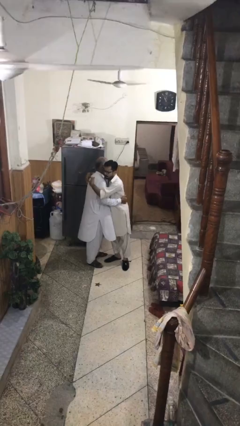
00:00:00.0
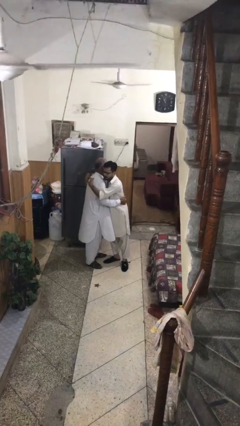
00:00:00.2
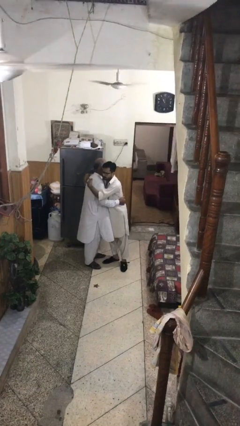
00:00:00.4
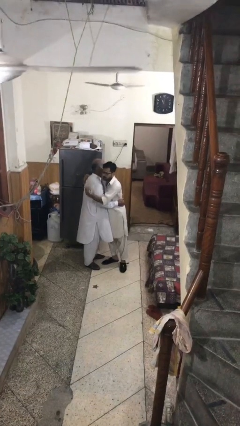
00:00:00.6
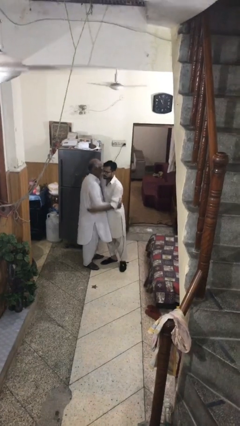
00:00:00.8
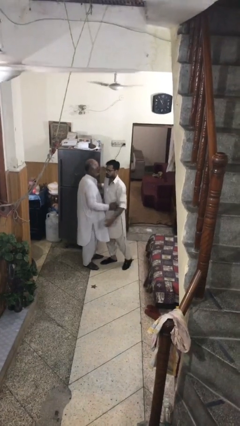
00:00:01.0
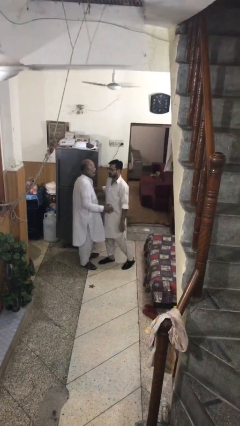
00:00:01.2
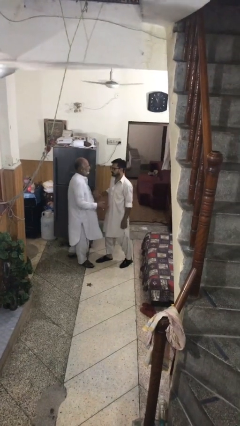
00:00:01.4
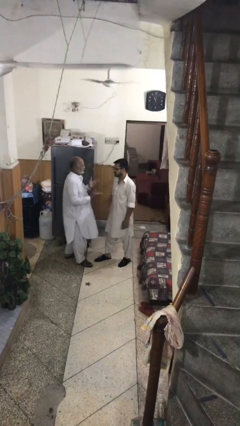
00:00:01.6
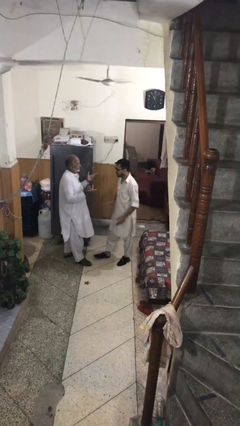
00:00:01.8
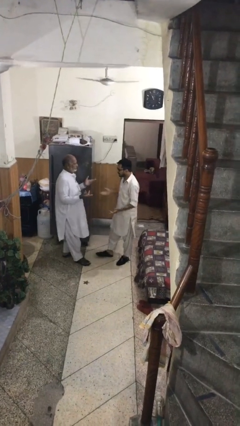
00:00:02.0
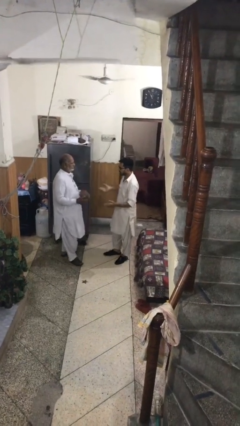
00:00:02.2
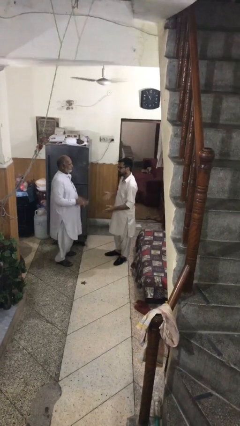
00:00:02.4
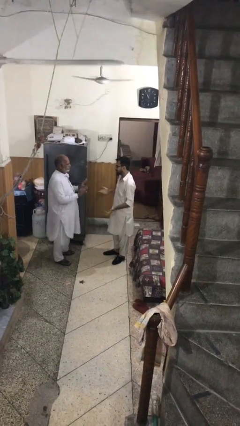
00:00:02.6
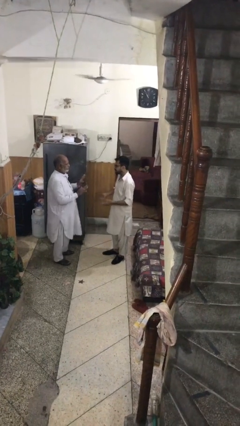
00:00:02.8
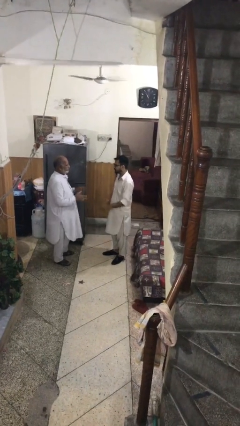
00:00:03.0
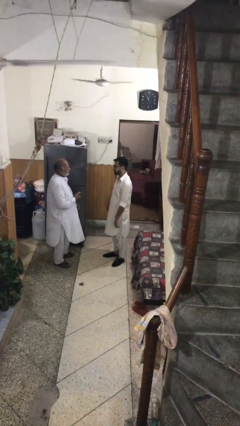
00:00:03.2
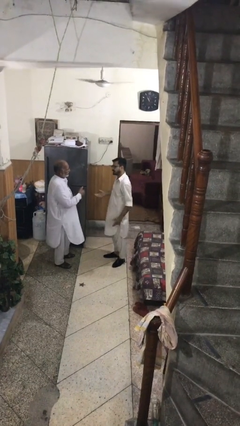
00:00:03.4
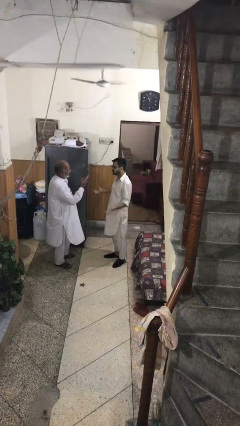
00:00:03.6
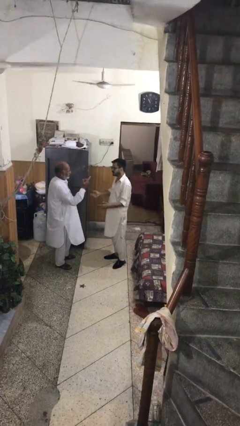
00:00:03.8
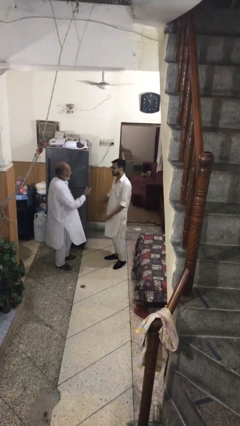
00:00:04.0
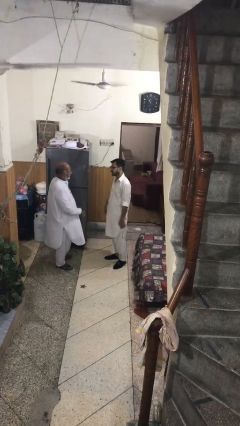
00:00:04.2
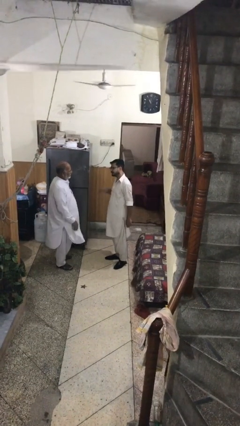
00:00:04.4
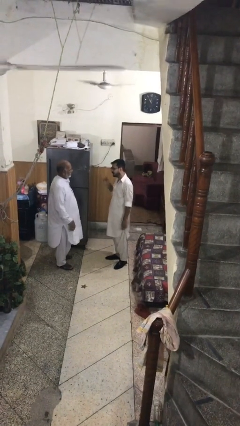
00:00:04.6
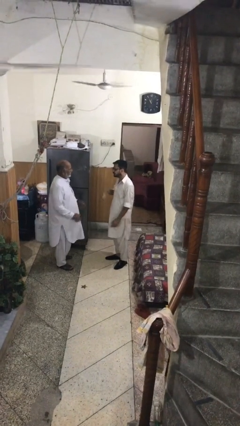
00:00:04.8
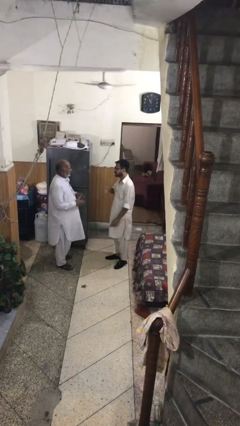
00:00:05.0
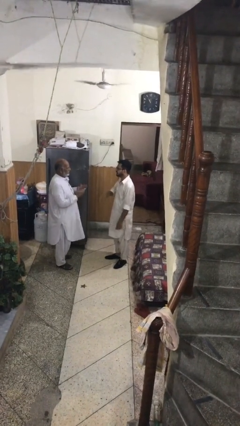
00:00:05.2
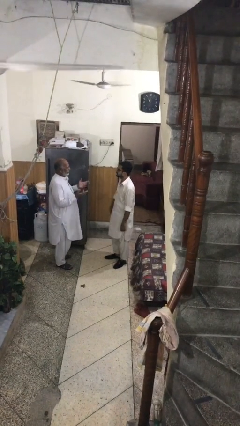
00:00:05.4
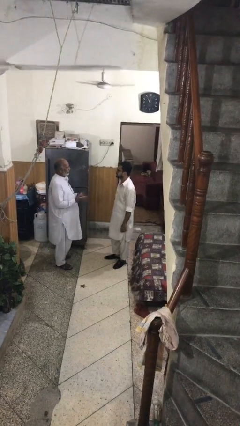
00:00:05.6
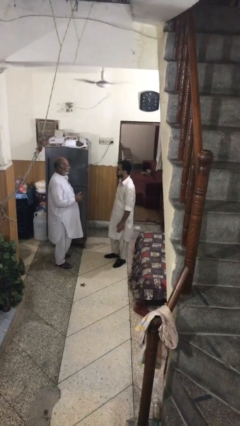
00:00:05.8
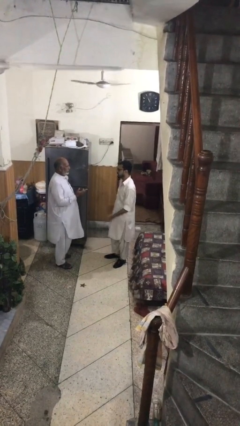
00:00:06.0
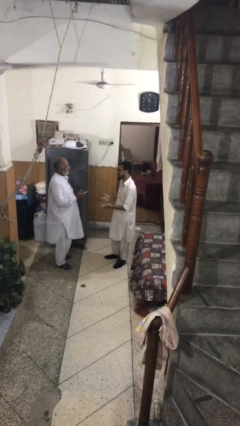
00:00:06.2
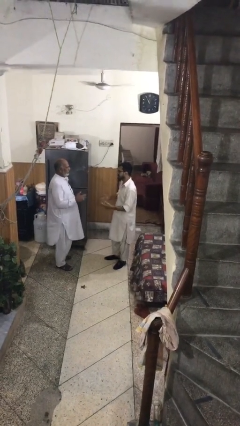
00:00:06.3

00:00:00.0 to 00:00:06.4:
person talks to person

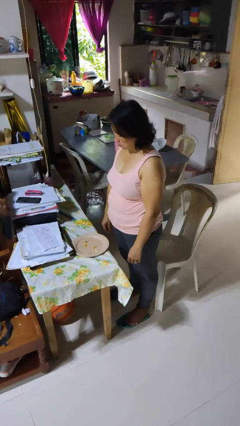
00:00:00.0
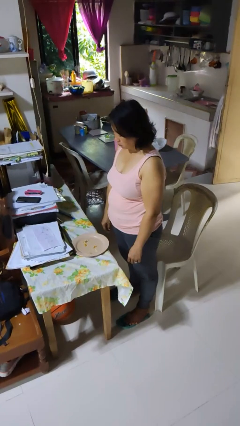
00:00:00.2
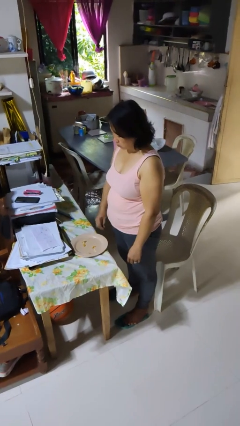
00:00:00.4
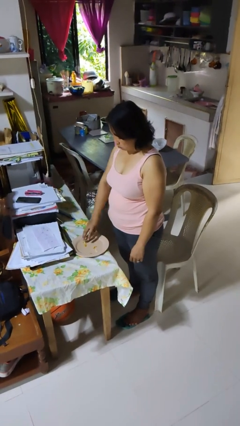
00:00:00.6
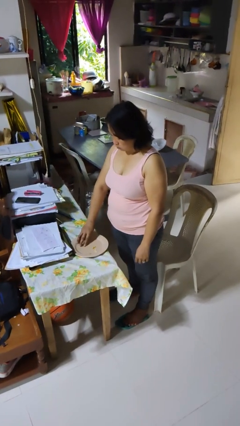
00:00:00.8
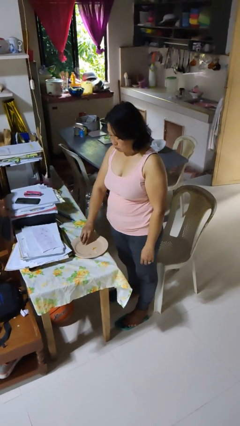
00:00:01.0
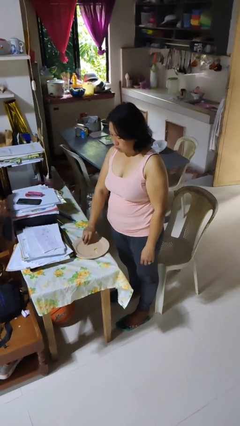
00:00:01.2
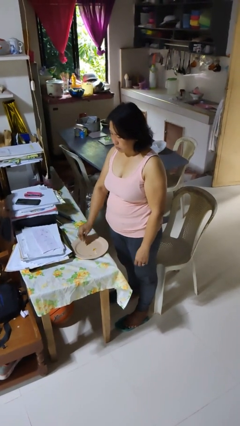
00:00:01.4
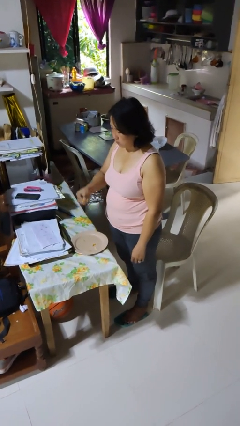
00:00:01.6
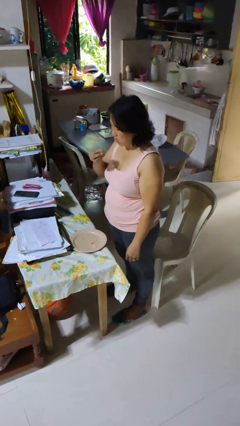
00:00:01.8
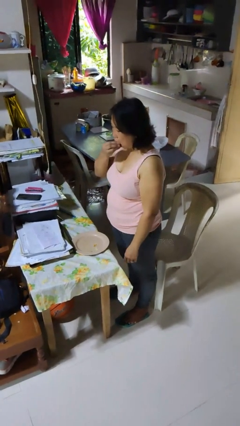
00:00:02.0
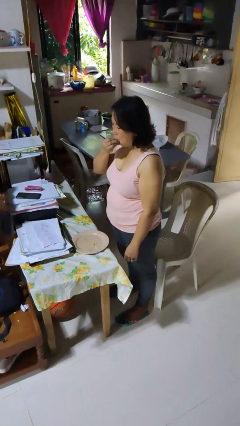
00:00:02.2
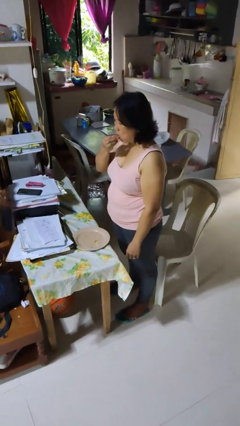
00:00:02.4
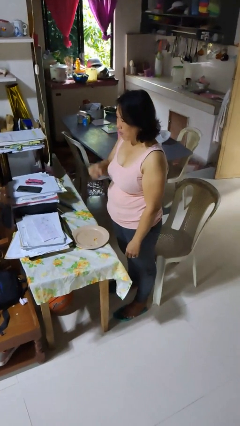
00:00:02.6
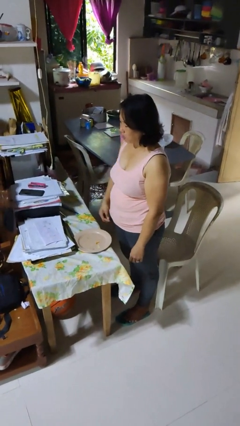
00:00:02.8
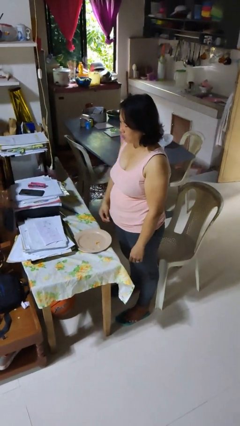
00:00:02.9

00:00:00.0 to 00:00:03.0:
person eats with hands

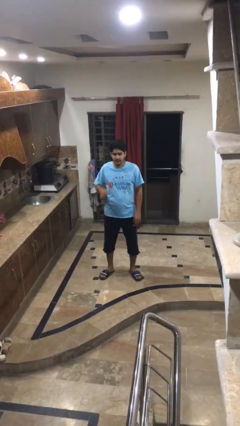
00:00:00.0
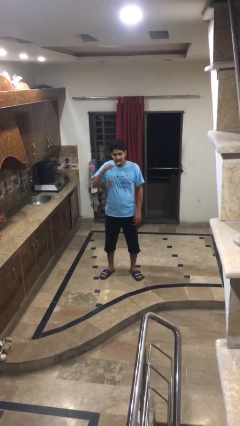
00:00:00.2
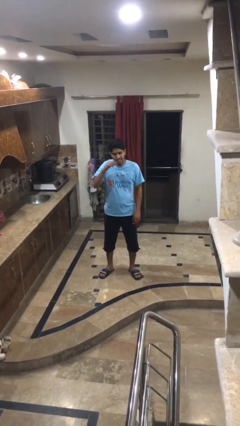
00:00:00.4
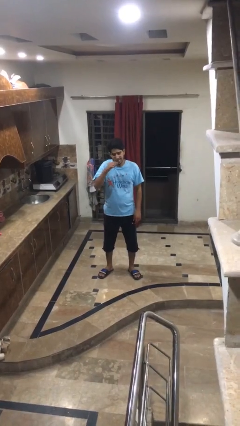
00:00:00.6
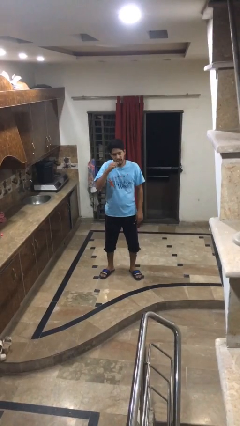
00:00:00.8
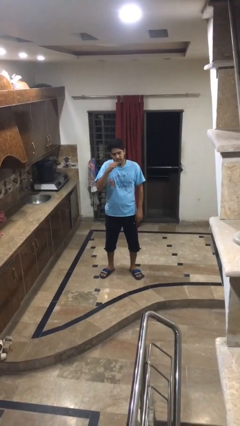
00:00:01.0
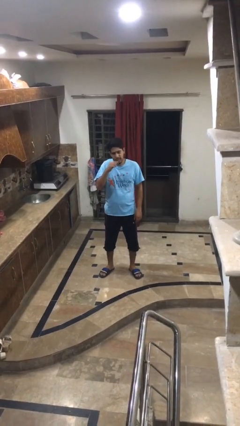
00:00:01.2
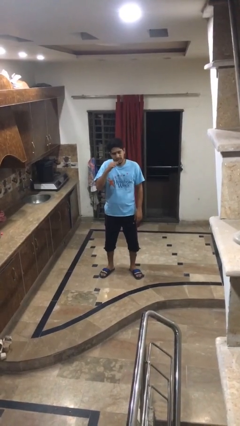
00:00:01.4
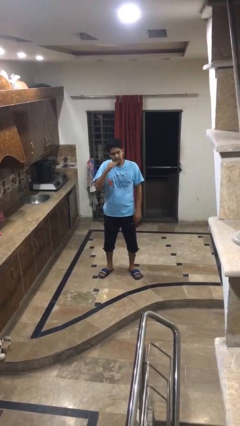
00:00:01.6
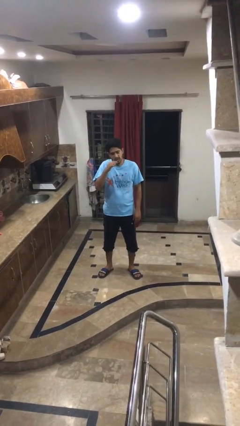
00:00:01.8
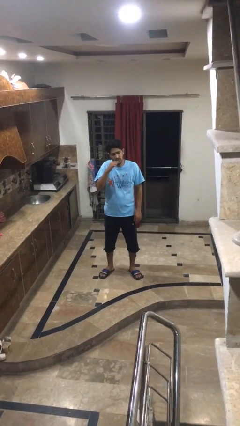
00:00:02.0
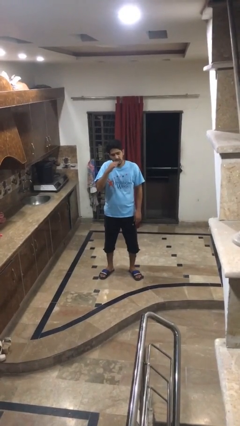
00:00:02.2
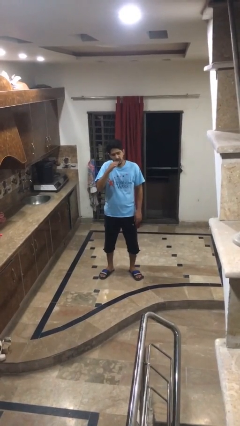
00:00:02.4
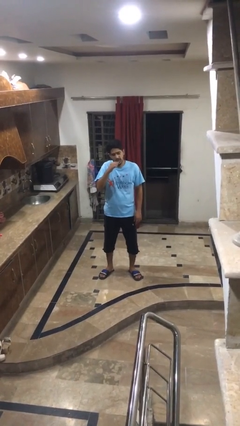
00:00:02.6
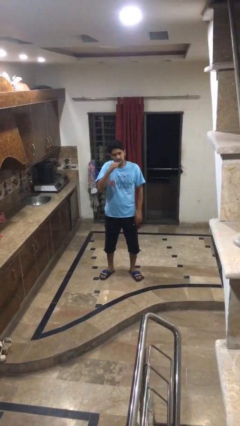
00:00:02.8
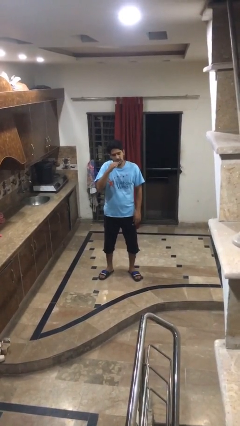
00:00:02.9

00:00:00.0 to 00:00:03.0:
person brushes teeth

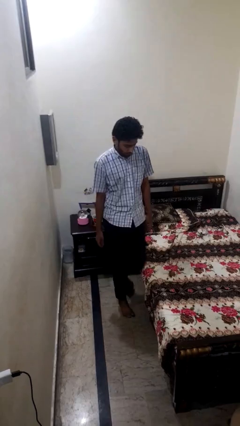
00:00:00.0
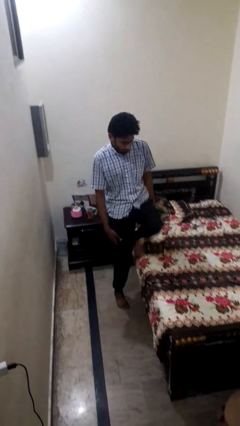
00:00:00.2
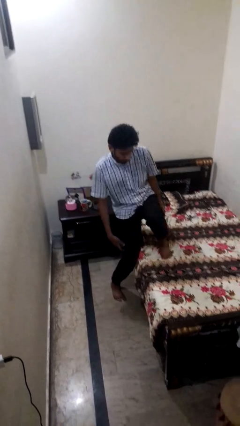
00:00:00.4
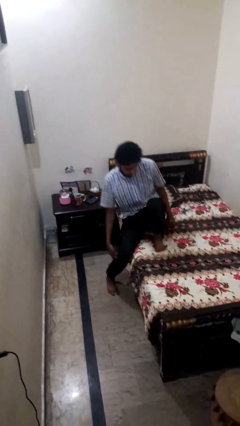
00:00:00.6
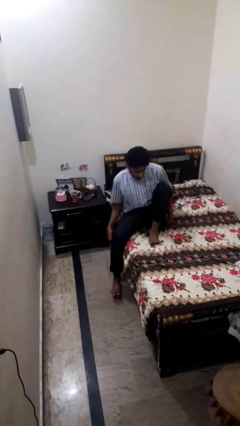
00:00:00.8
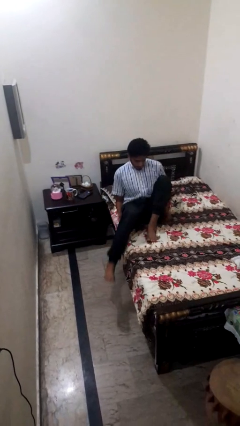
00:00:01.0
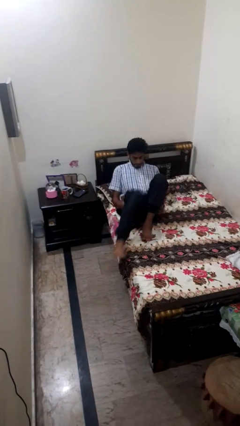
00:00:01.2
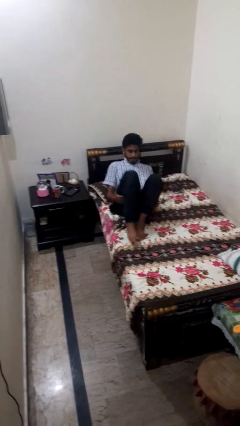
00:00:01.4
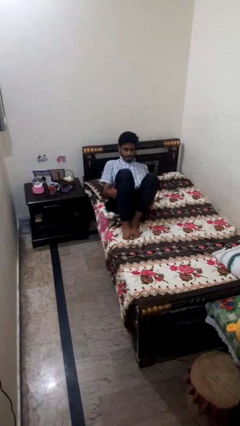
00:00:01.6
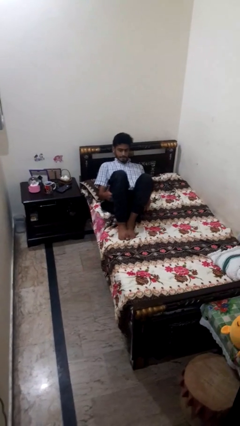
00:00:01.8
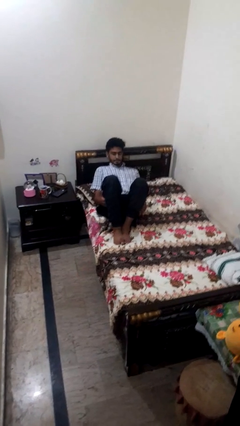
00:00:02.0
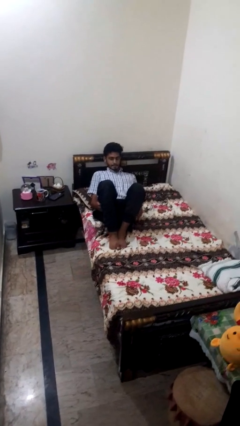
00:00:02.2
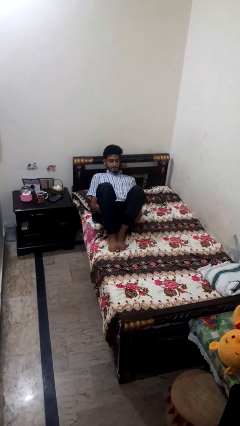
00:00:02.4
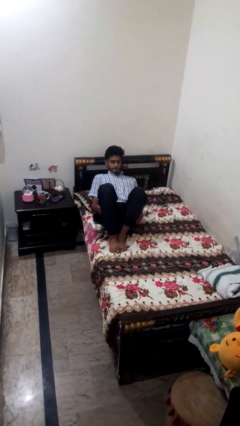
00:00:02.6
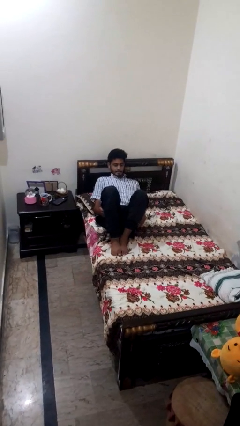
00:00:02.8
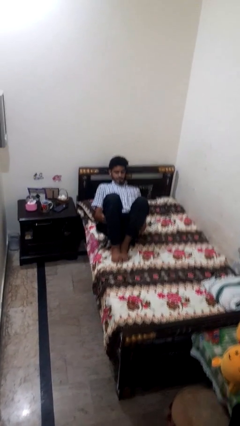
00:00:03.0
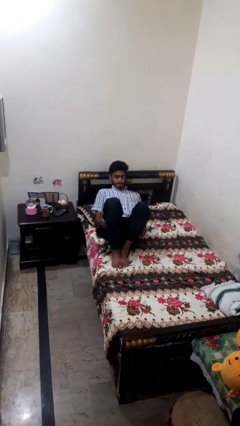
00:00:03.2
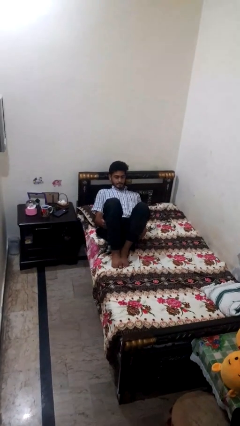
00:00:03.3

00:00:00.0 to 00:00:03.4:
person lies down on bed

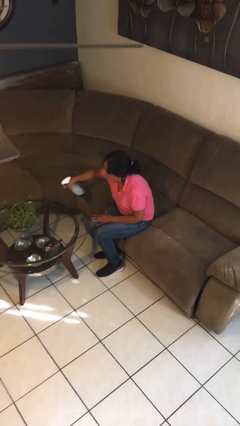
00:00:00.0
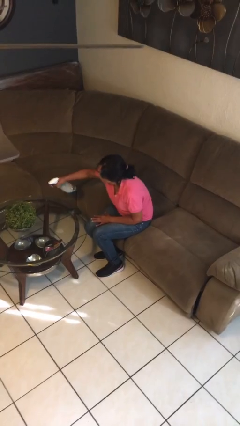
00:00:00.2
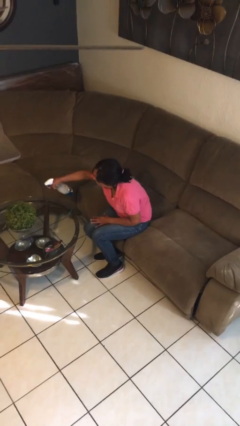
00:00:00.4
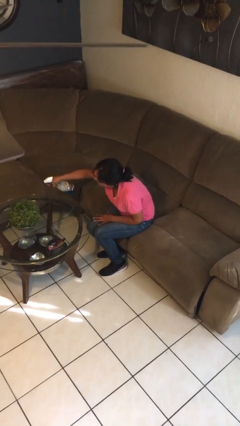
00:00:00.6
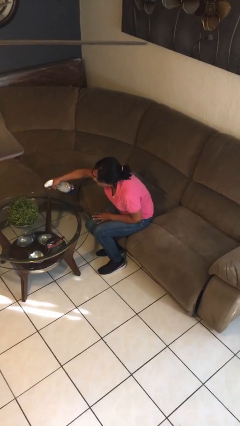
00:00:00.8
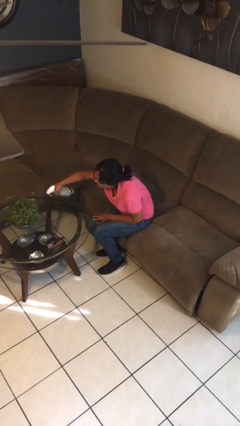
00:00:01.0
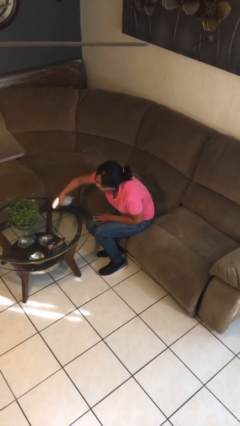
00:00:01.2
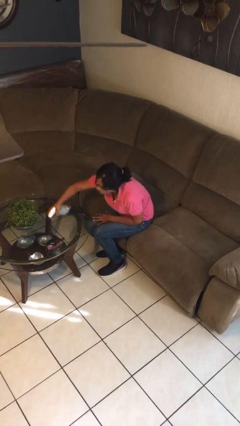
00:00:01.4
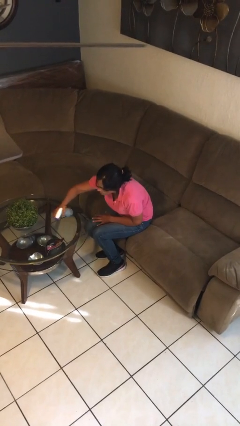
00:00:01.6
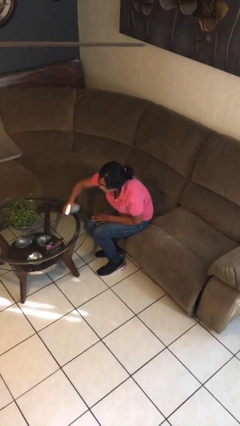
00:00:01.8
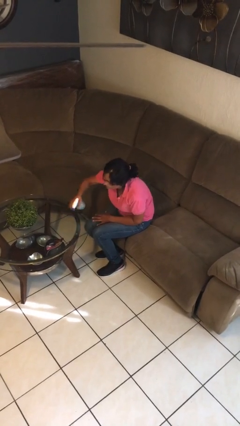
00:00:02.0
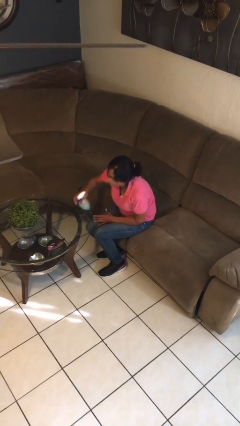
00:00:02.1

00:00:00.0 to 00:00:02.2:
person sprays from bottle
